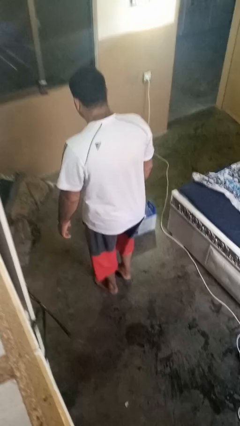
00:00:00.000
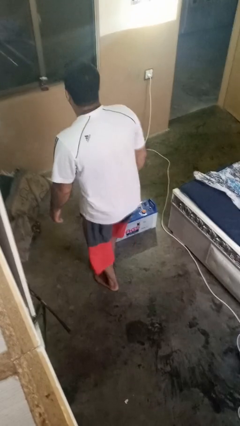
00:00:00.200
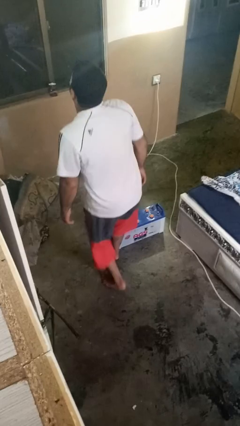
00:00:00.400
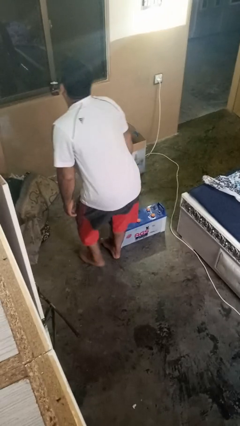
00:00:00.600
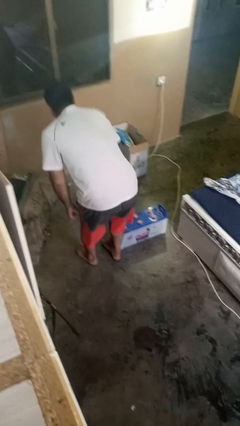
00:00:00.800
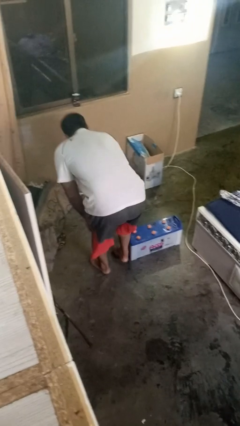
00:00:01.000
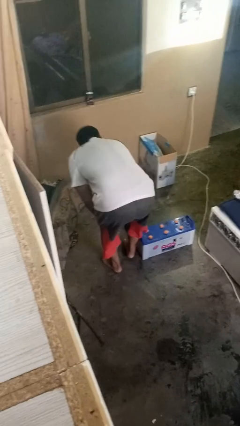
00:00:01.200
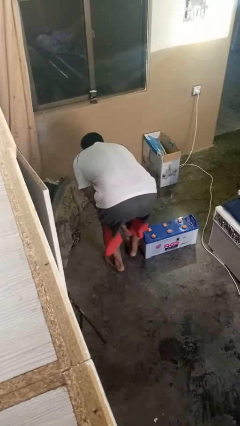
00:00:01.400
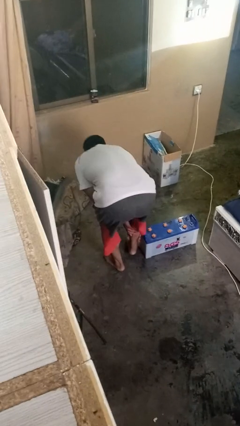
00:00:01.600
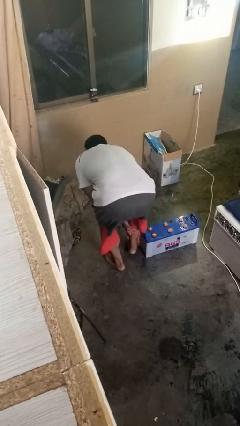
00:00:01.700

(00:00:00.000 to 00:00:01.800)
person trips on object on floor

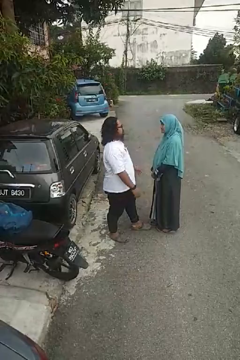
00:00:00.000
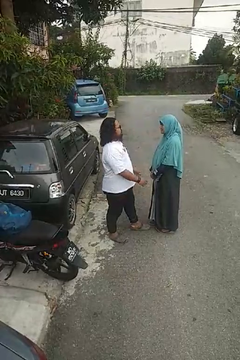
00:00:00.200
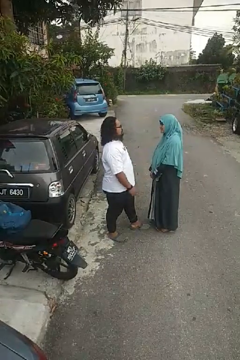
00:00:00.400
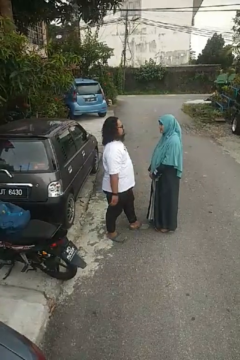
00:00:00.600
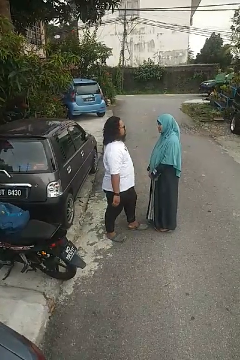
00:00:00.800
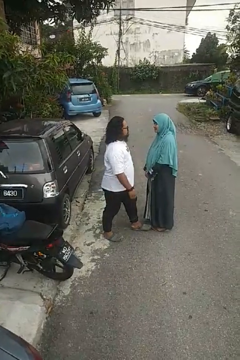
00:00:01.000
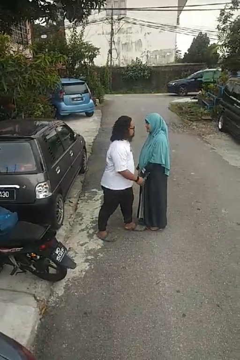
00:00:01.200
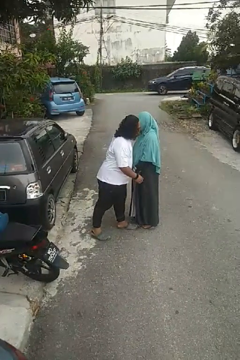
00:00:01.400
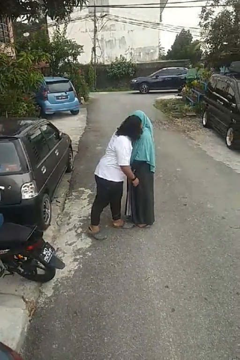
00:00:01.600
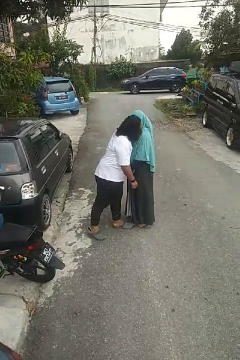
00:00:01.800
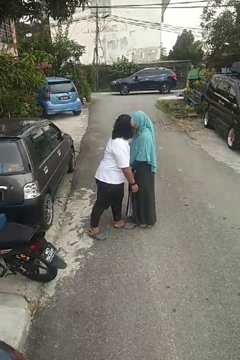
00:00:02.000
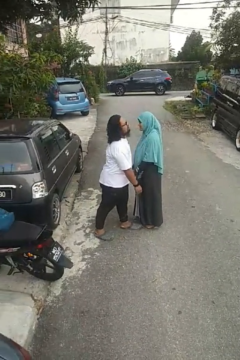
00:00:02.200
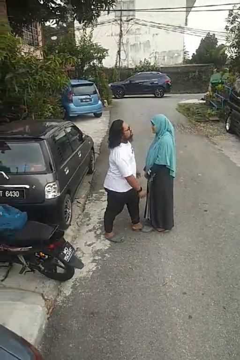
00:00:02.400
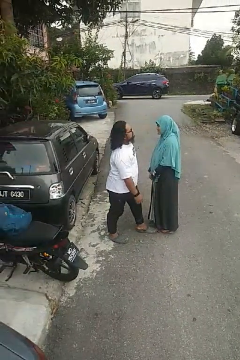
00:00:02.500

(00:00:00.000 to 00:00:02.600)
person kisses cheek of person

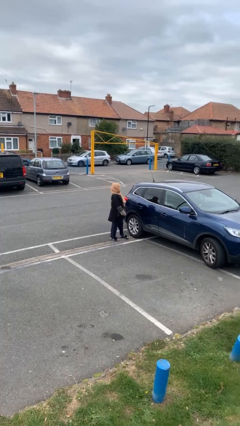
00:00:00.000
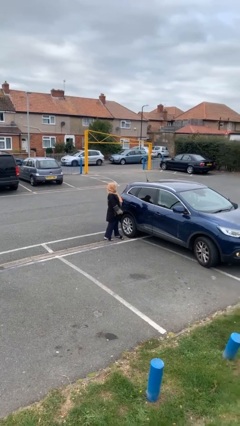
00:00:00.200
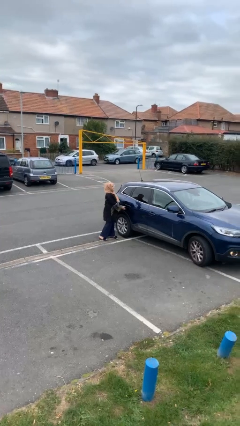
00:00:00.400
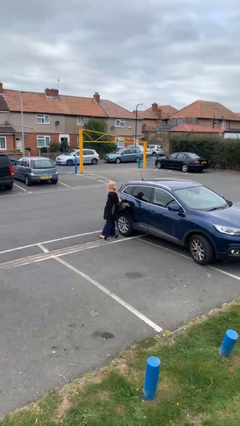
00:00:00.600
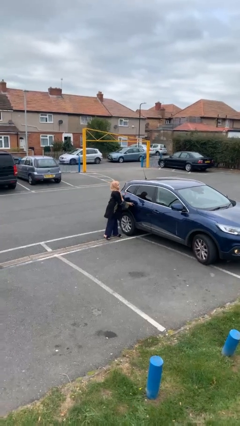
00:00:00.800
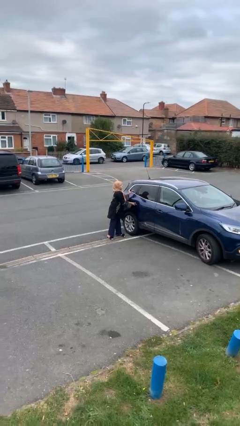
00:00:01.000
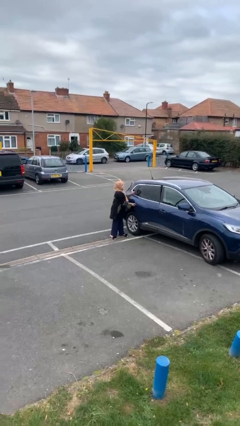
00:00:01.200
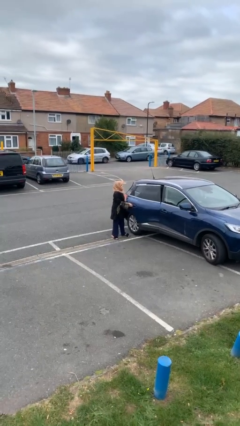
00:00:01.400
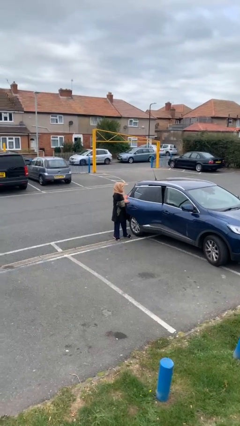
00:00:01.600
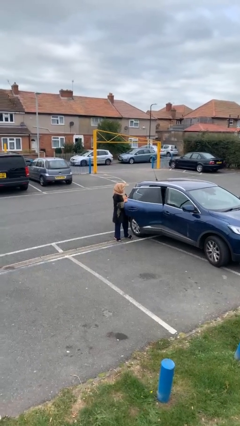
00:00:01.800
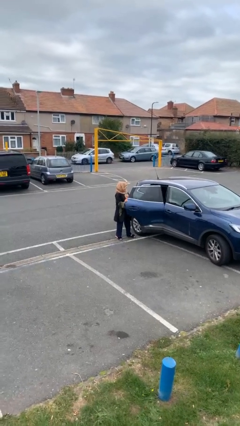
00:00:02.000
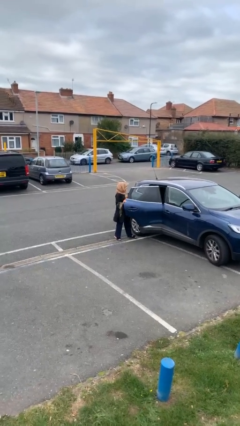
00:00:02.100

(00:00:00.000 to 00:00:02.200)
person opens car door

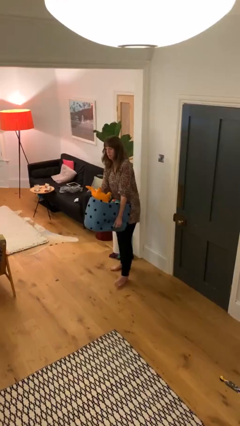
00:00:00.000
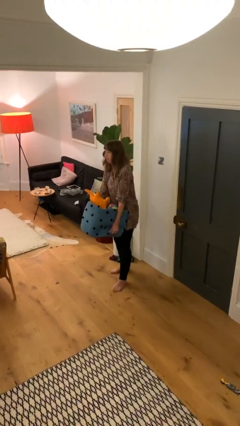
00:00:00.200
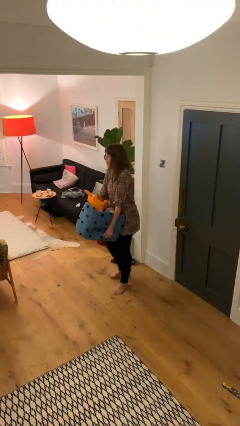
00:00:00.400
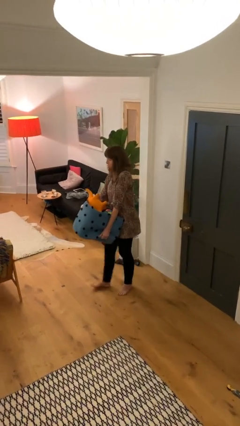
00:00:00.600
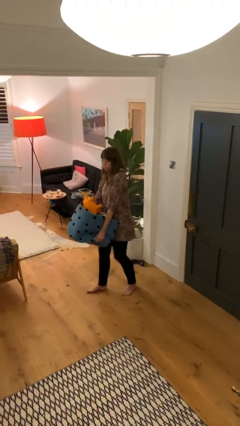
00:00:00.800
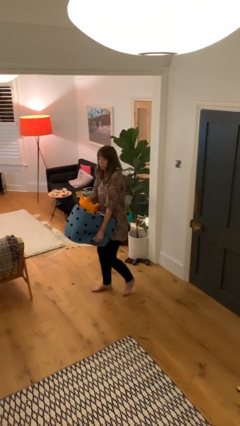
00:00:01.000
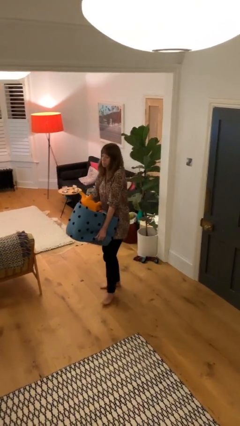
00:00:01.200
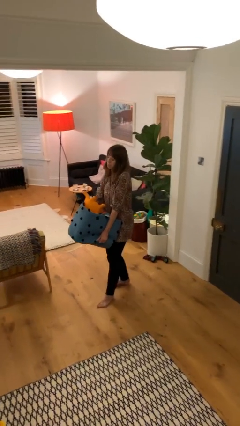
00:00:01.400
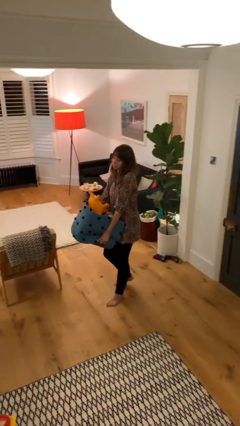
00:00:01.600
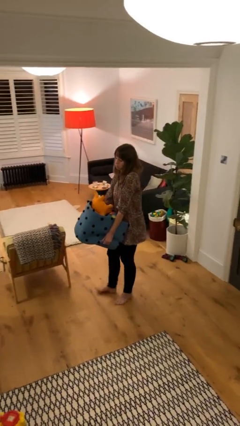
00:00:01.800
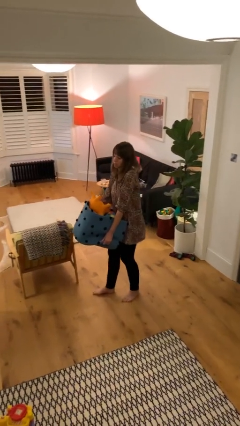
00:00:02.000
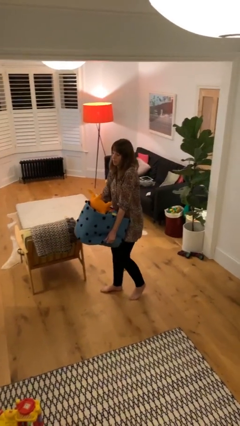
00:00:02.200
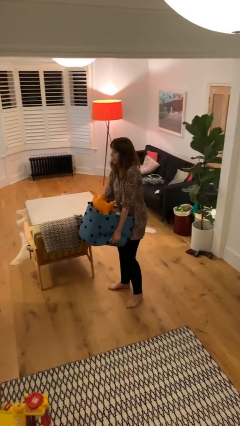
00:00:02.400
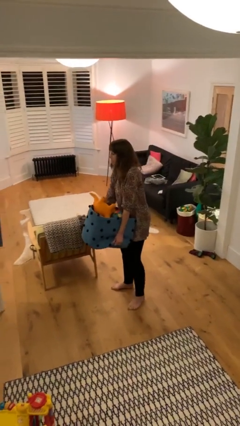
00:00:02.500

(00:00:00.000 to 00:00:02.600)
person carries heavy object

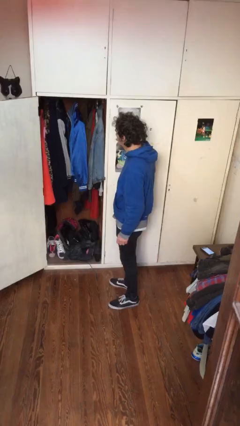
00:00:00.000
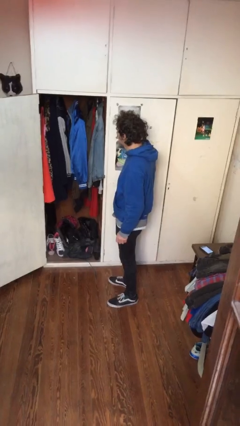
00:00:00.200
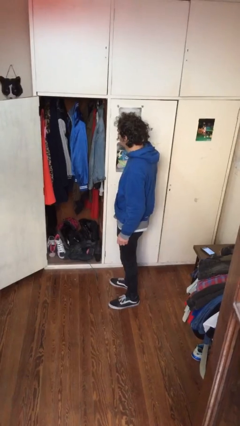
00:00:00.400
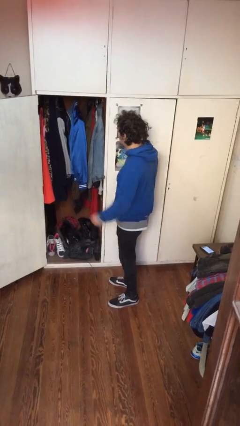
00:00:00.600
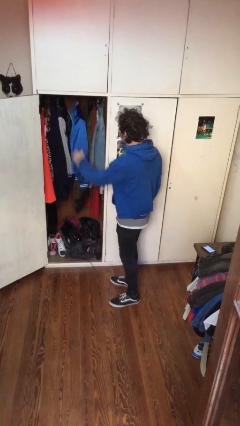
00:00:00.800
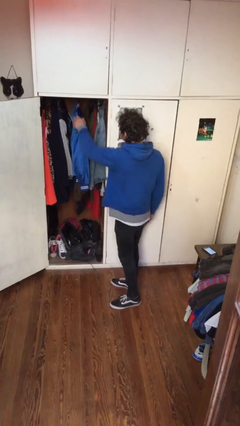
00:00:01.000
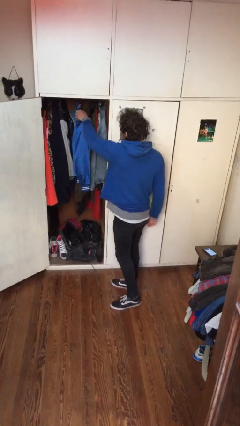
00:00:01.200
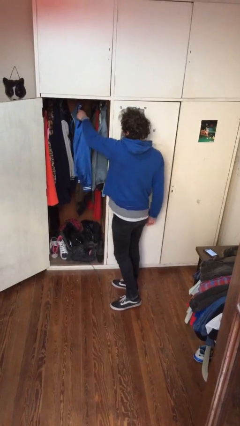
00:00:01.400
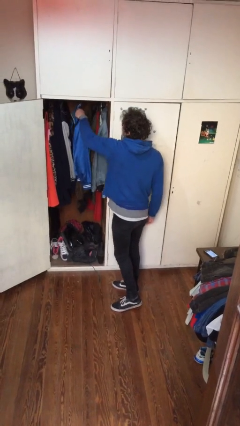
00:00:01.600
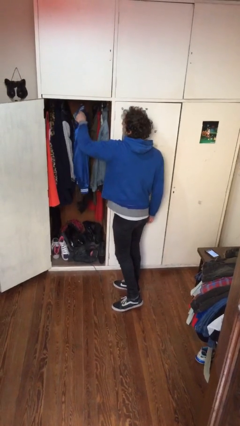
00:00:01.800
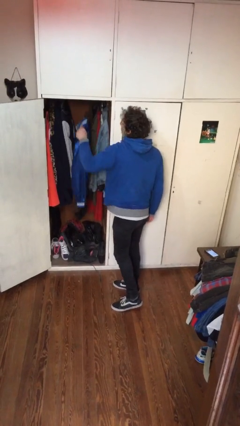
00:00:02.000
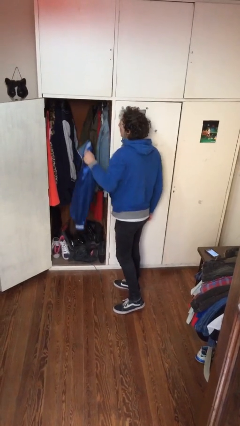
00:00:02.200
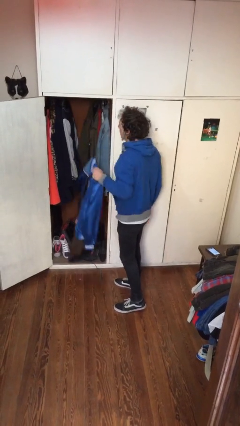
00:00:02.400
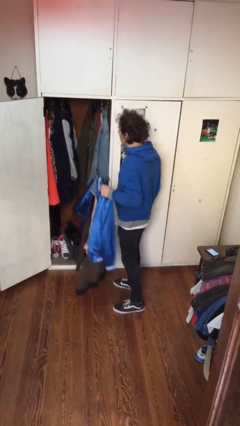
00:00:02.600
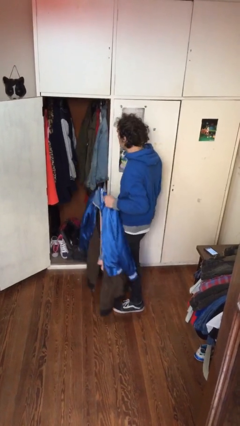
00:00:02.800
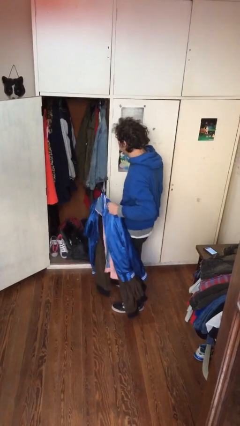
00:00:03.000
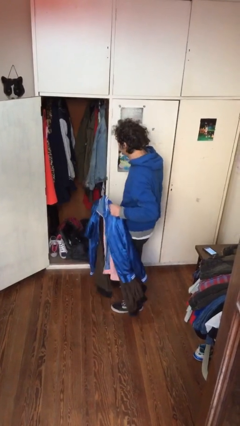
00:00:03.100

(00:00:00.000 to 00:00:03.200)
person takes clothes from closet

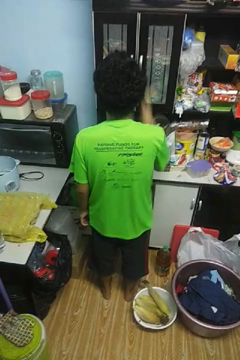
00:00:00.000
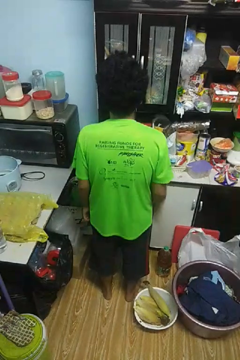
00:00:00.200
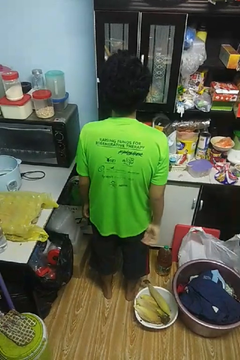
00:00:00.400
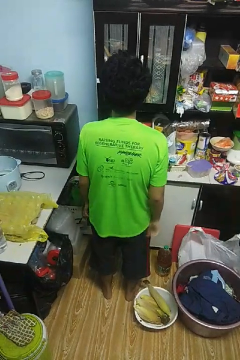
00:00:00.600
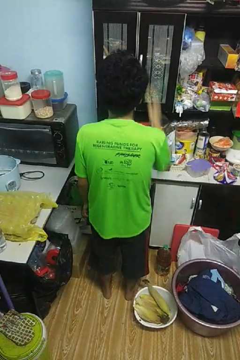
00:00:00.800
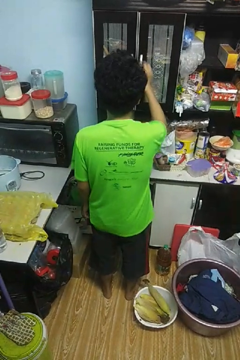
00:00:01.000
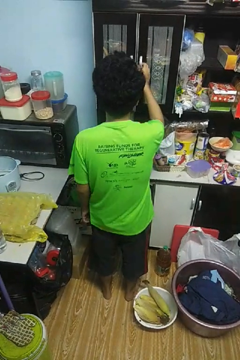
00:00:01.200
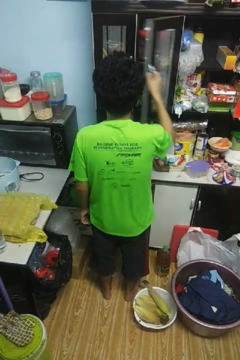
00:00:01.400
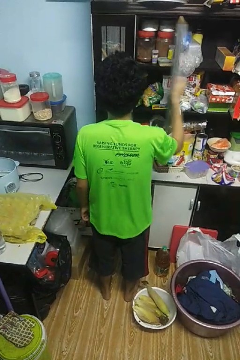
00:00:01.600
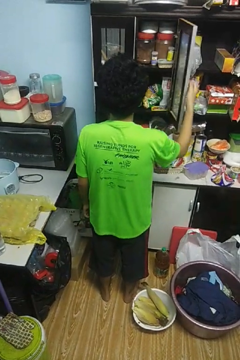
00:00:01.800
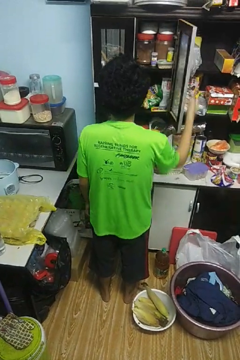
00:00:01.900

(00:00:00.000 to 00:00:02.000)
person opens cabinet

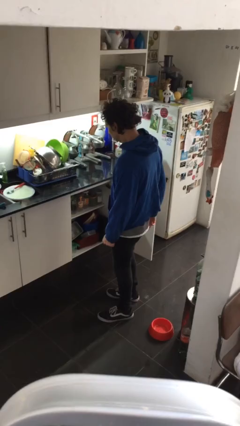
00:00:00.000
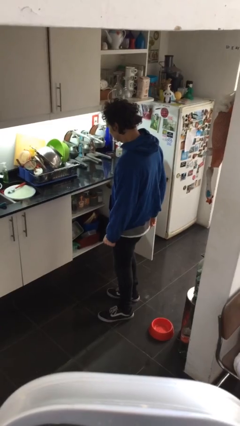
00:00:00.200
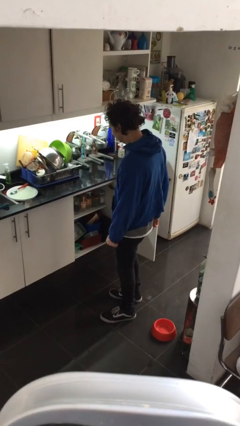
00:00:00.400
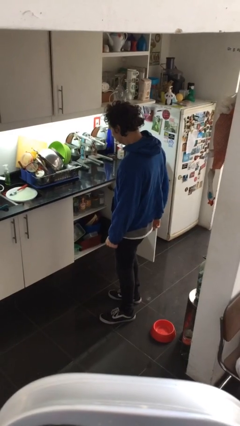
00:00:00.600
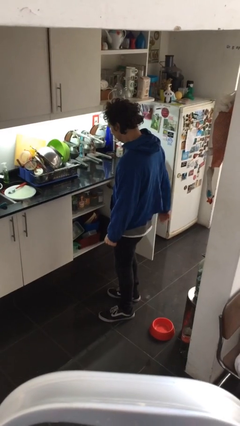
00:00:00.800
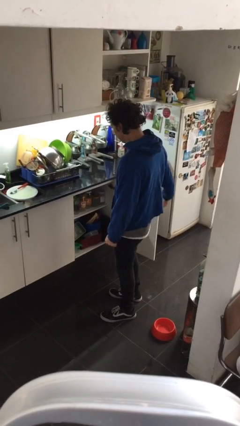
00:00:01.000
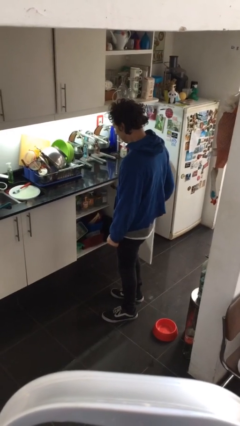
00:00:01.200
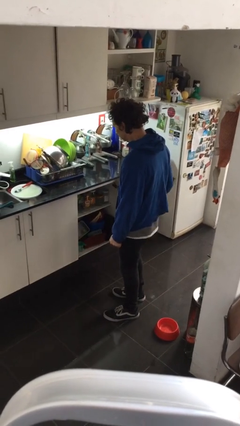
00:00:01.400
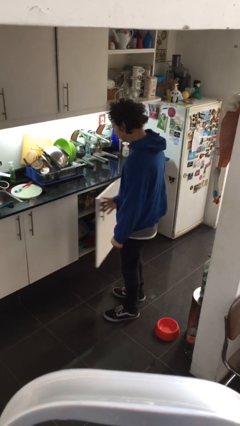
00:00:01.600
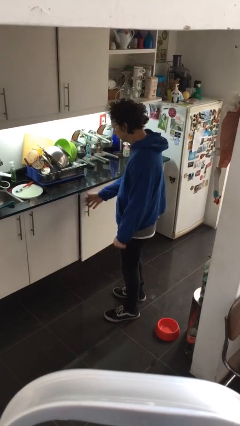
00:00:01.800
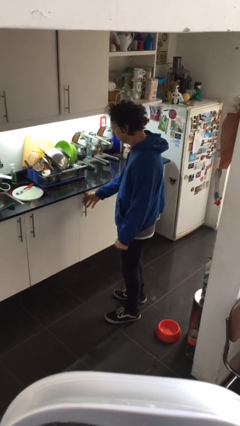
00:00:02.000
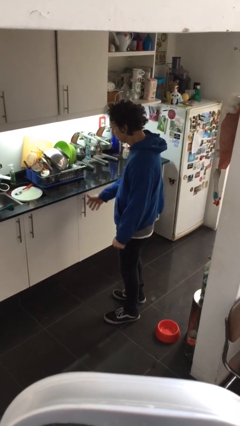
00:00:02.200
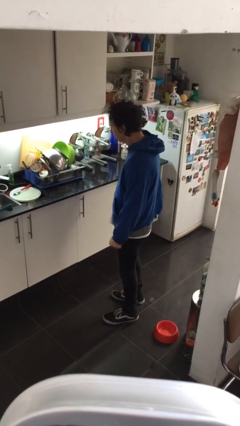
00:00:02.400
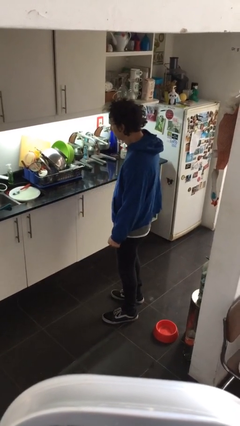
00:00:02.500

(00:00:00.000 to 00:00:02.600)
person closes cabinet

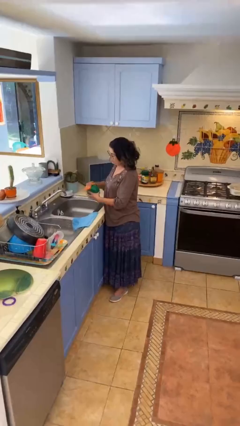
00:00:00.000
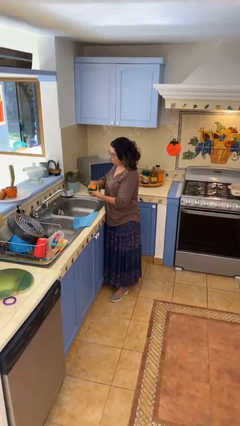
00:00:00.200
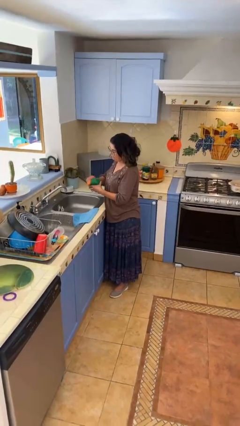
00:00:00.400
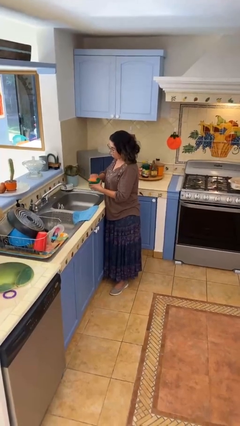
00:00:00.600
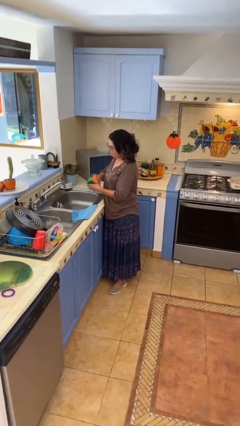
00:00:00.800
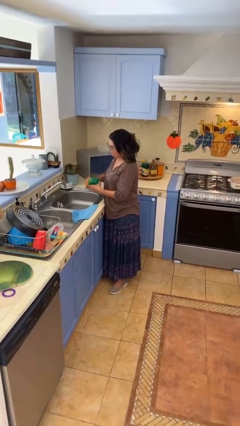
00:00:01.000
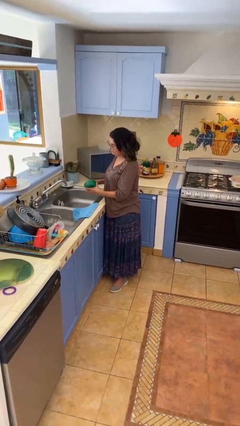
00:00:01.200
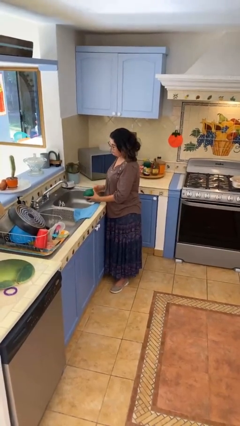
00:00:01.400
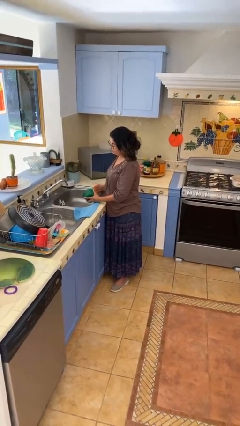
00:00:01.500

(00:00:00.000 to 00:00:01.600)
person washes dish
